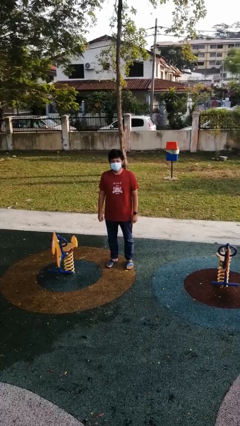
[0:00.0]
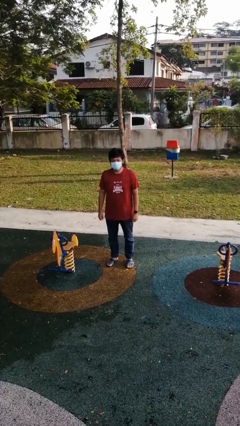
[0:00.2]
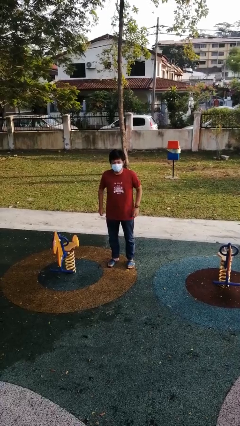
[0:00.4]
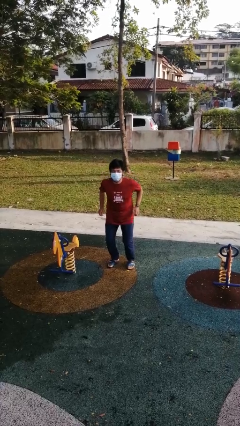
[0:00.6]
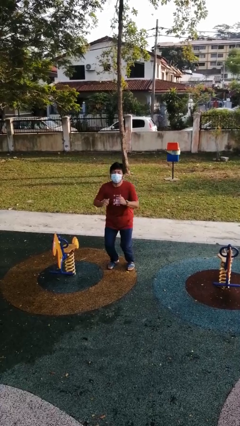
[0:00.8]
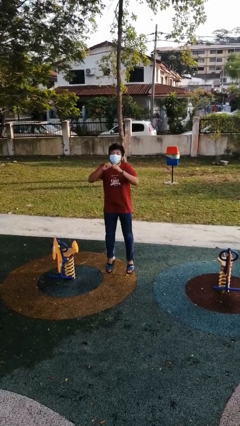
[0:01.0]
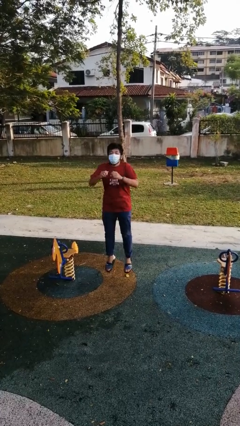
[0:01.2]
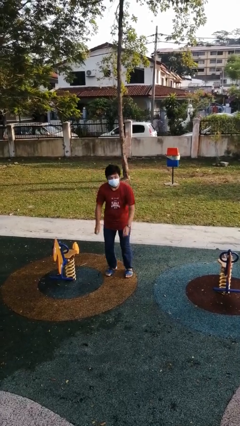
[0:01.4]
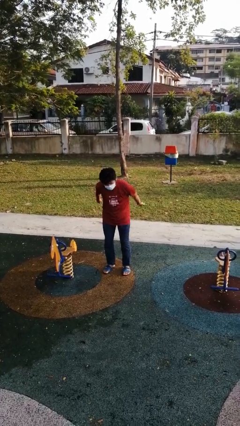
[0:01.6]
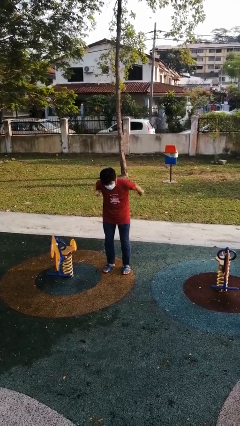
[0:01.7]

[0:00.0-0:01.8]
person jumps

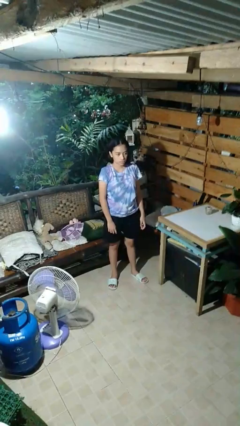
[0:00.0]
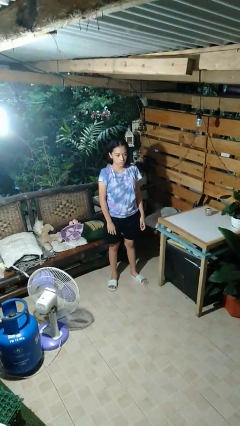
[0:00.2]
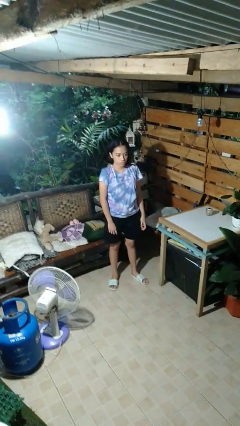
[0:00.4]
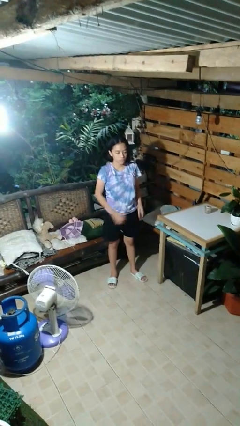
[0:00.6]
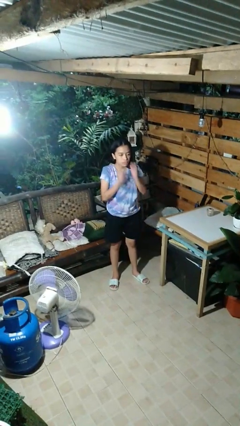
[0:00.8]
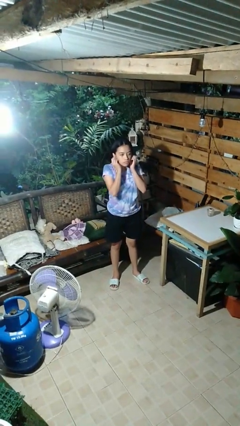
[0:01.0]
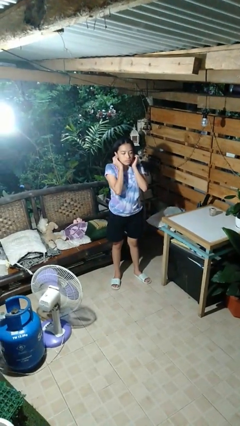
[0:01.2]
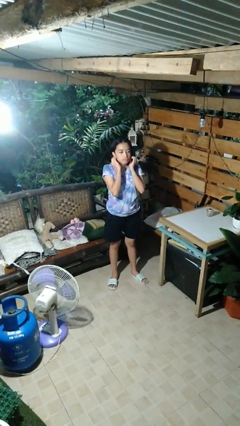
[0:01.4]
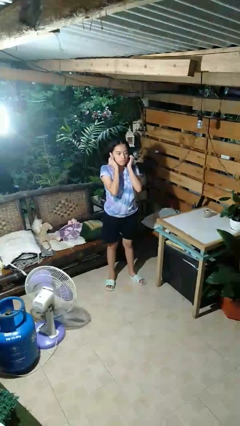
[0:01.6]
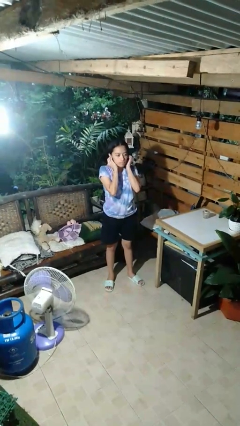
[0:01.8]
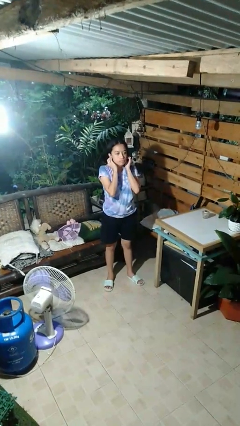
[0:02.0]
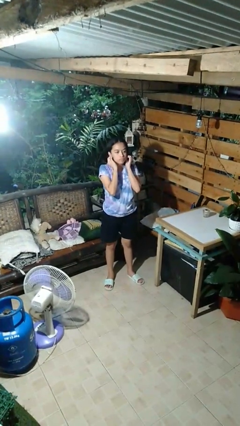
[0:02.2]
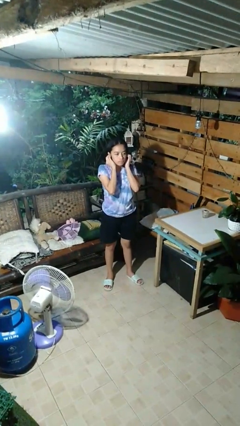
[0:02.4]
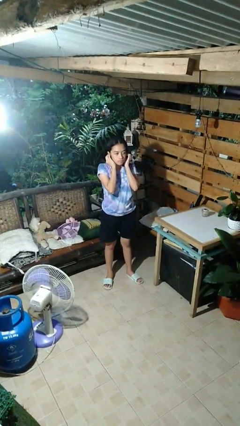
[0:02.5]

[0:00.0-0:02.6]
person touches earlobe

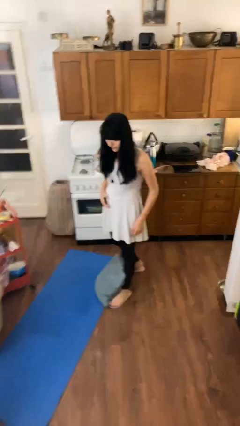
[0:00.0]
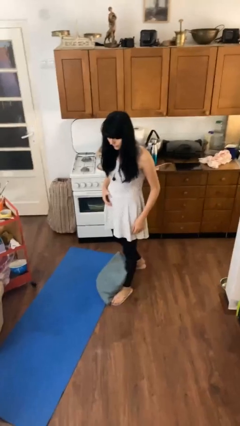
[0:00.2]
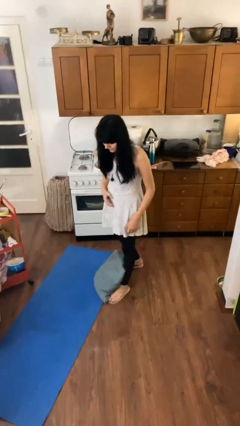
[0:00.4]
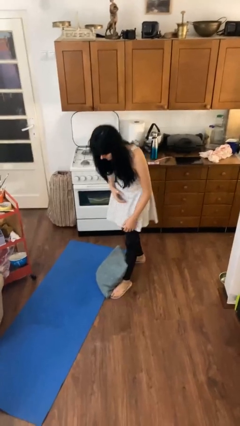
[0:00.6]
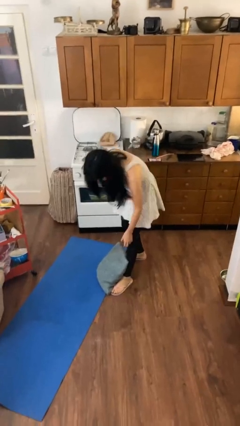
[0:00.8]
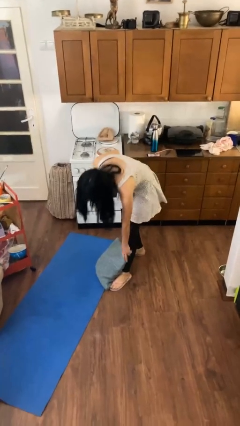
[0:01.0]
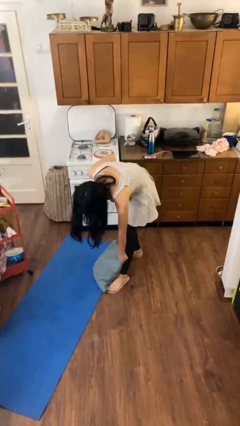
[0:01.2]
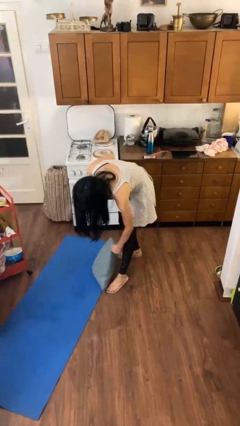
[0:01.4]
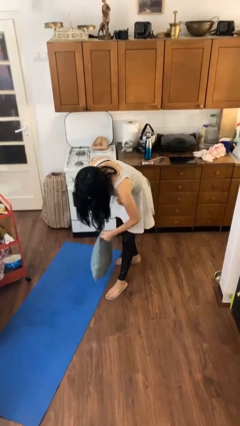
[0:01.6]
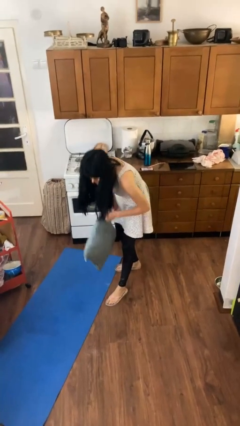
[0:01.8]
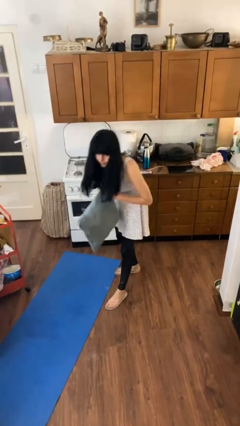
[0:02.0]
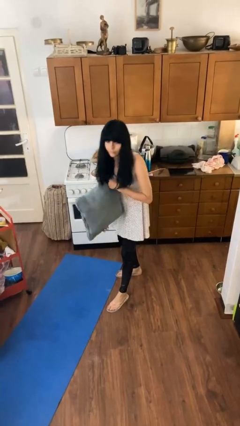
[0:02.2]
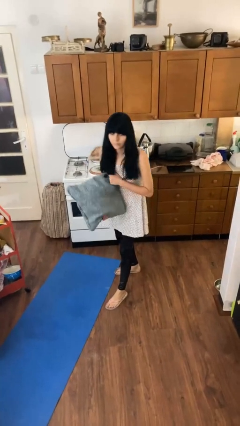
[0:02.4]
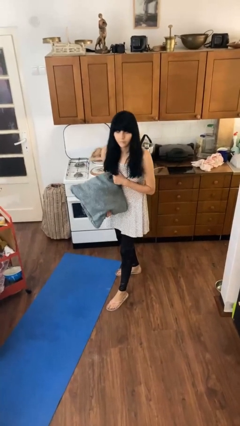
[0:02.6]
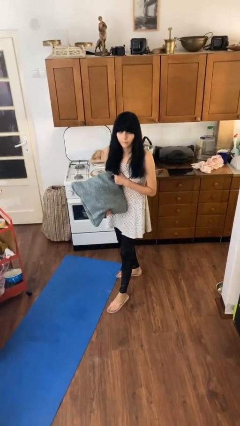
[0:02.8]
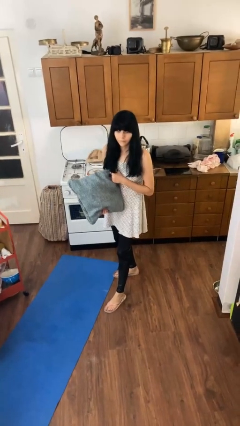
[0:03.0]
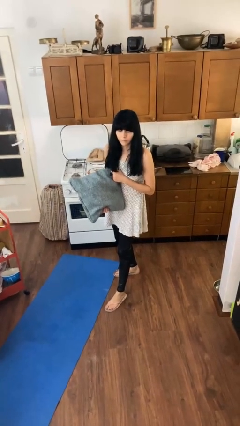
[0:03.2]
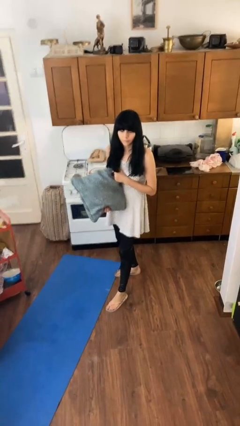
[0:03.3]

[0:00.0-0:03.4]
person picks up object from floor

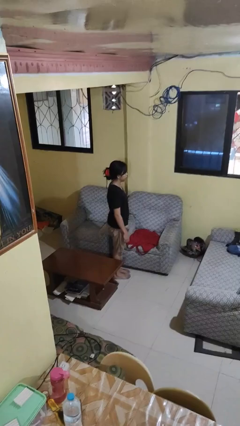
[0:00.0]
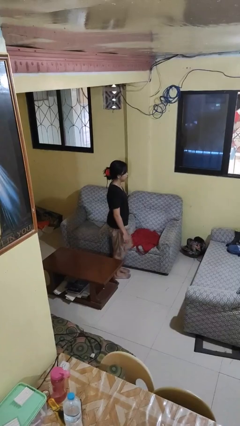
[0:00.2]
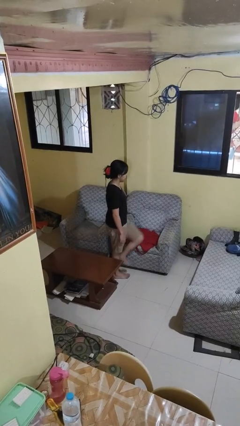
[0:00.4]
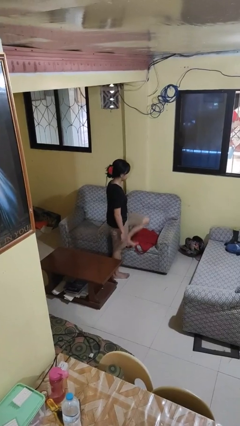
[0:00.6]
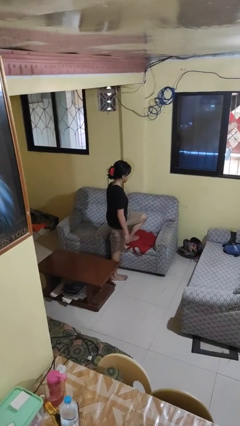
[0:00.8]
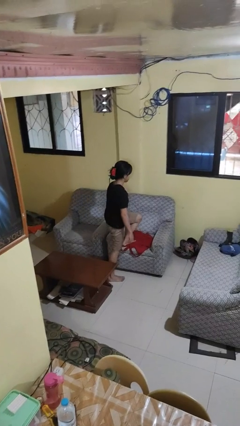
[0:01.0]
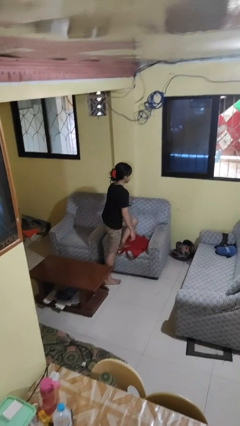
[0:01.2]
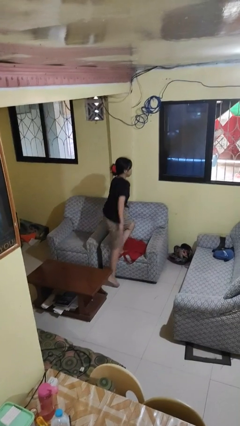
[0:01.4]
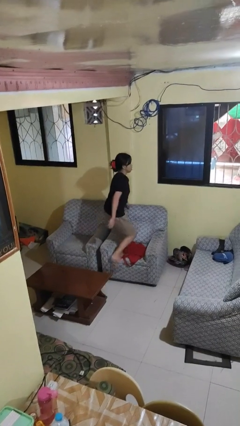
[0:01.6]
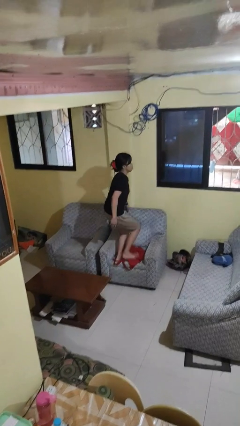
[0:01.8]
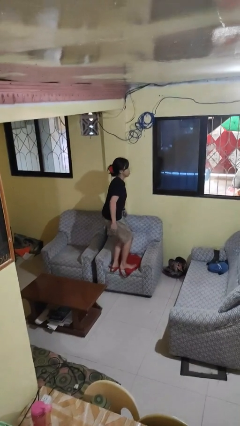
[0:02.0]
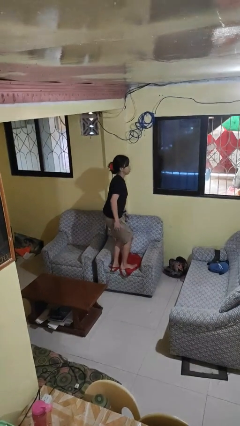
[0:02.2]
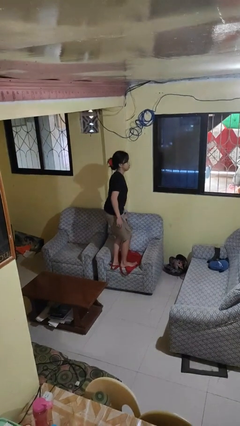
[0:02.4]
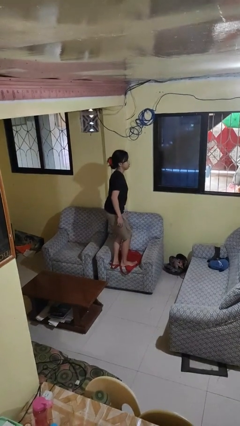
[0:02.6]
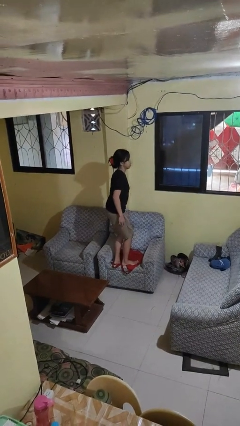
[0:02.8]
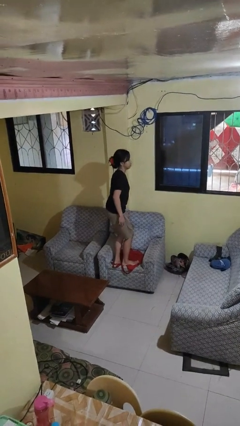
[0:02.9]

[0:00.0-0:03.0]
person climbs on couch

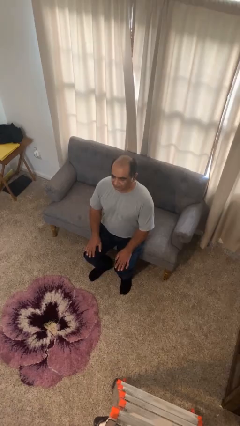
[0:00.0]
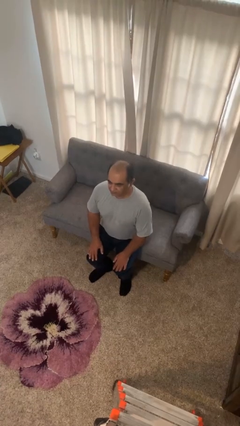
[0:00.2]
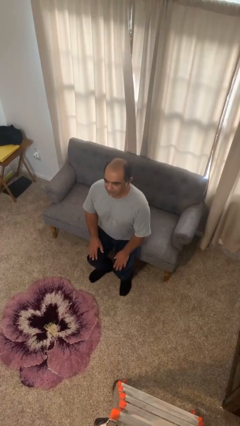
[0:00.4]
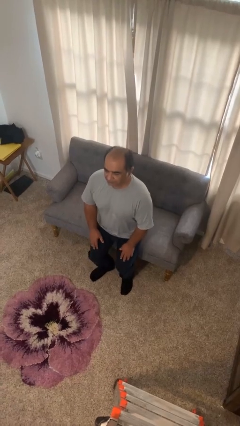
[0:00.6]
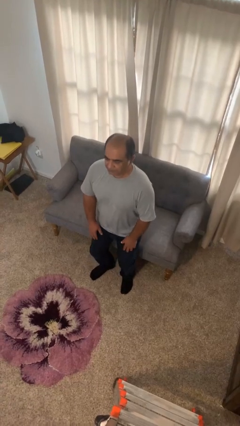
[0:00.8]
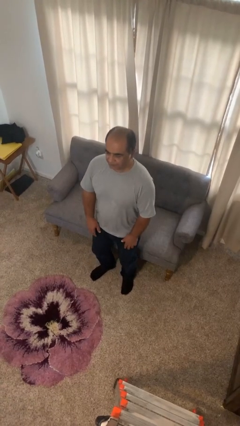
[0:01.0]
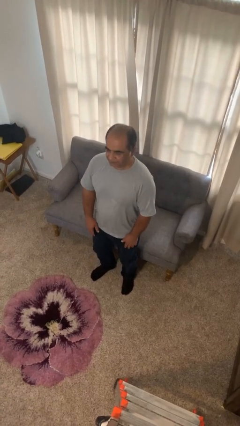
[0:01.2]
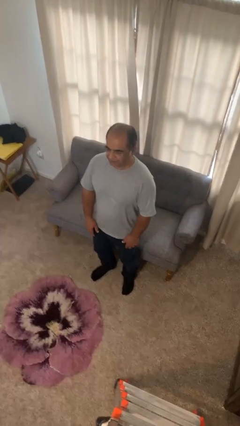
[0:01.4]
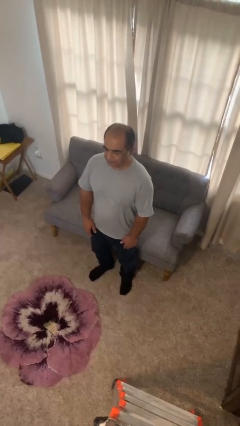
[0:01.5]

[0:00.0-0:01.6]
person stands up

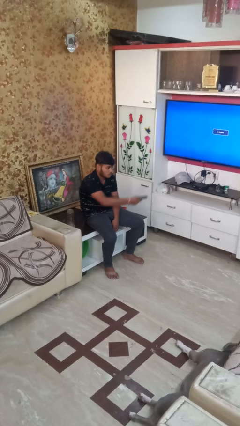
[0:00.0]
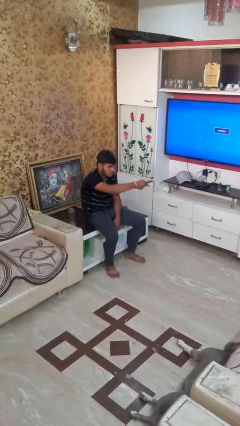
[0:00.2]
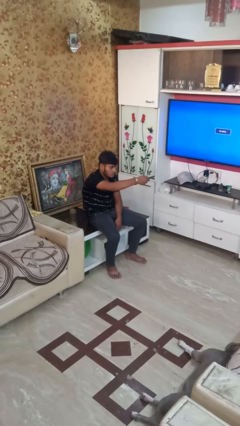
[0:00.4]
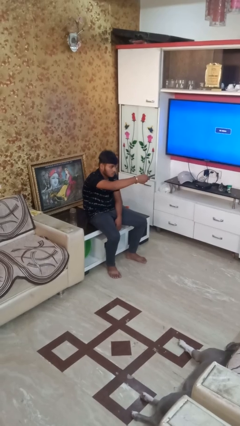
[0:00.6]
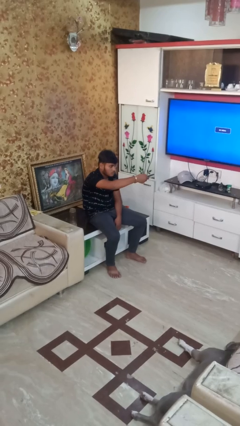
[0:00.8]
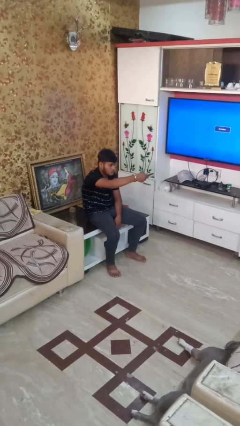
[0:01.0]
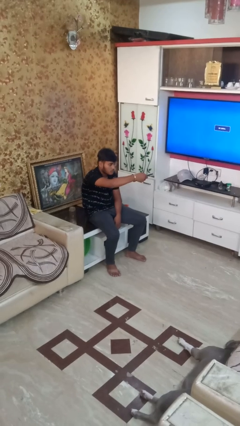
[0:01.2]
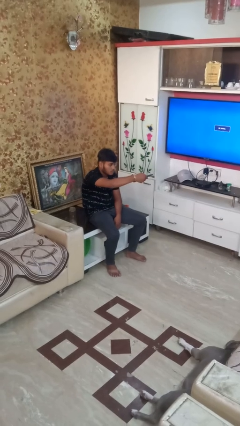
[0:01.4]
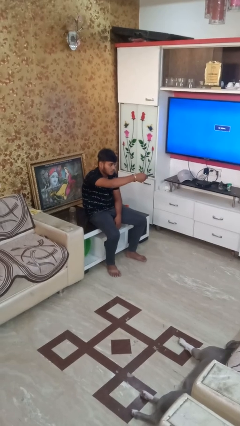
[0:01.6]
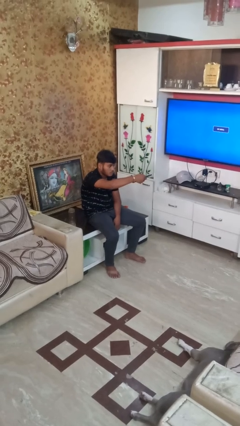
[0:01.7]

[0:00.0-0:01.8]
person uses television remote

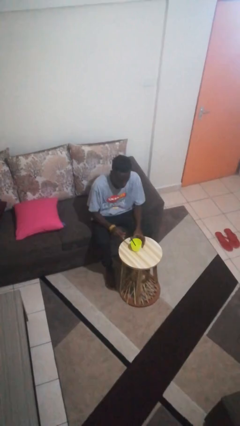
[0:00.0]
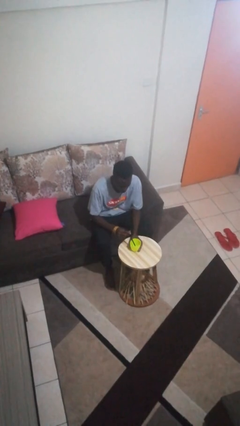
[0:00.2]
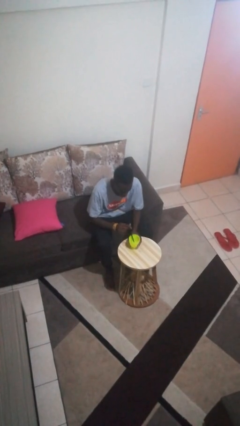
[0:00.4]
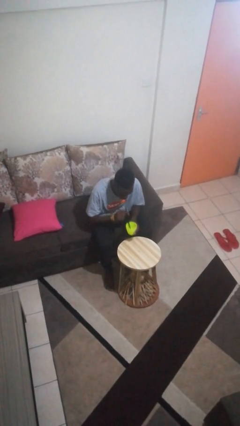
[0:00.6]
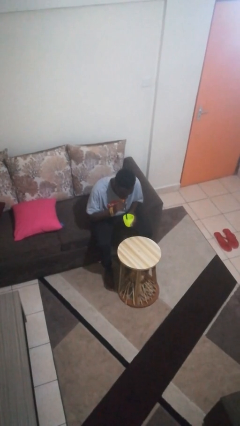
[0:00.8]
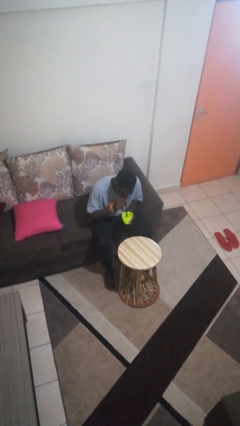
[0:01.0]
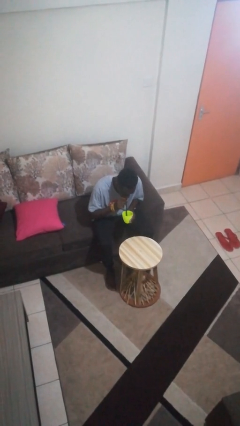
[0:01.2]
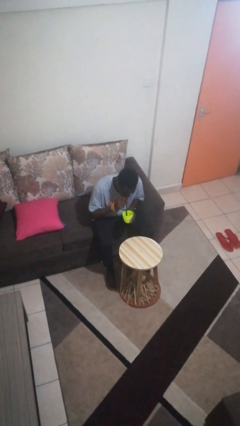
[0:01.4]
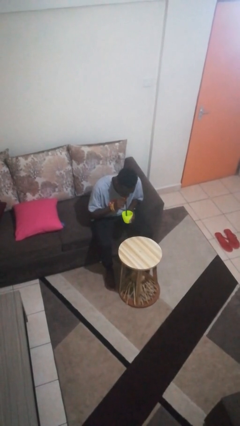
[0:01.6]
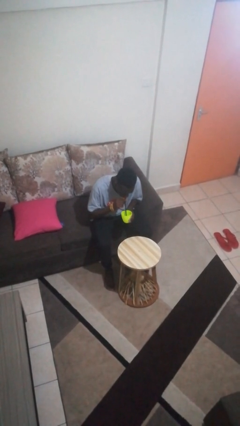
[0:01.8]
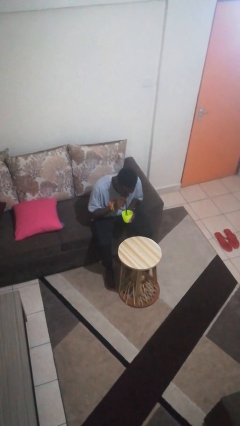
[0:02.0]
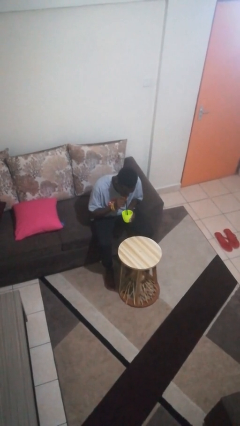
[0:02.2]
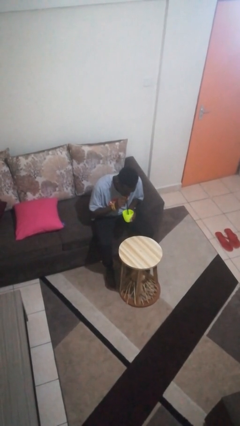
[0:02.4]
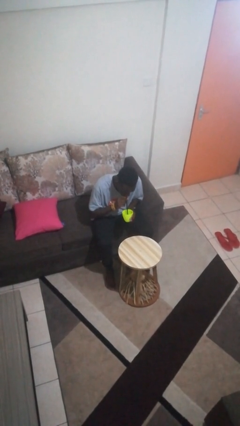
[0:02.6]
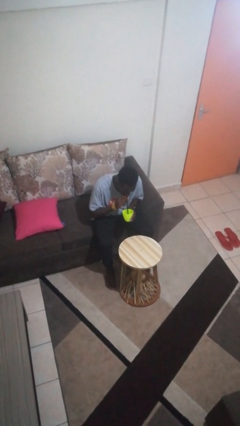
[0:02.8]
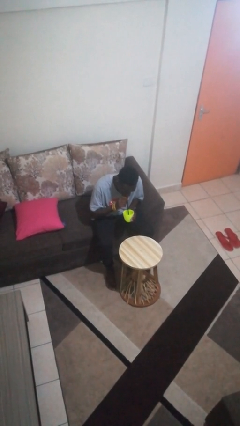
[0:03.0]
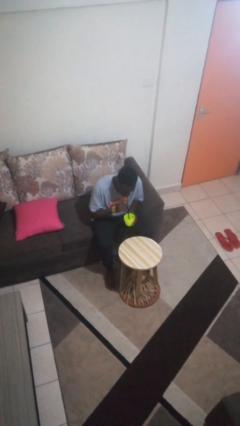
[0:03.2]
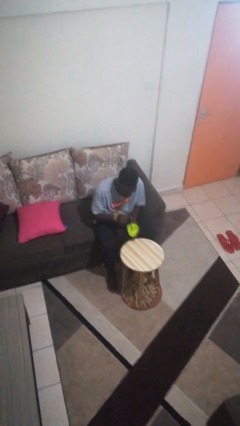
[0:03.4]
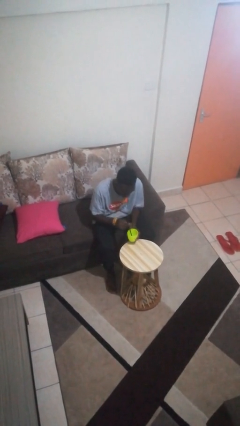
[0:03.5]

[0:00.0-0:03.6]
person drinks from straw
